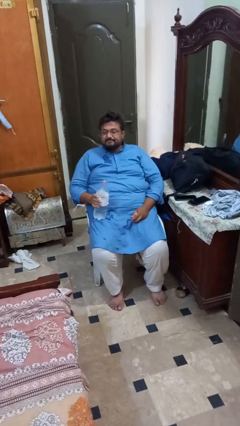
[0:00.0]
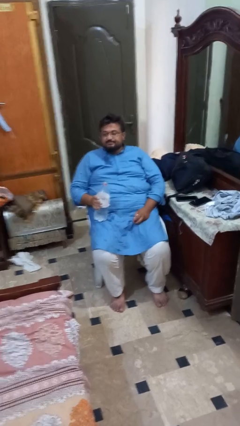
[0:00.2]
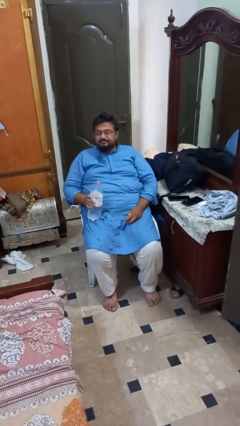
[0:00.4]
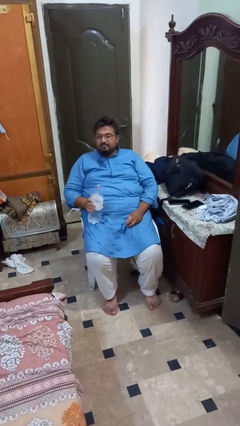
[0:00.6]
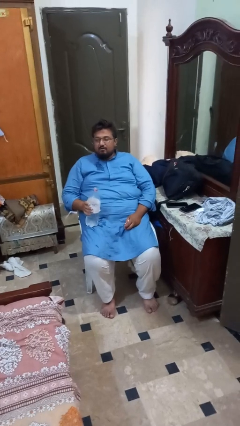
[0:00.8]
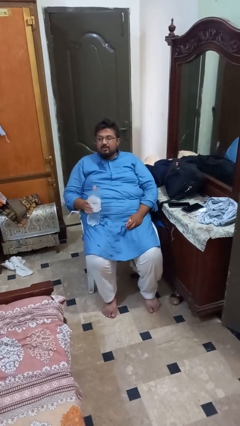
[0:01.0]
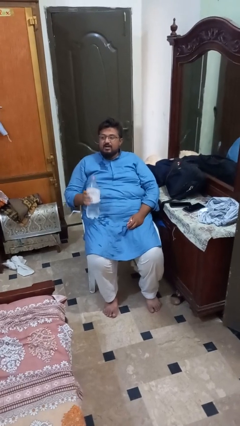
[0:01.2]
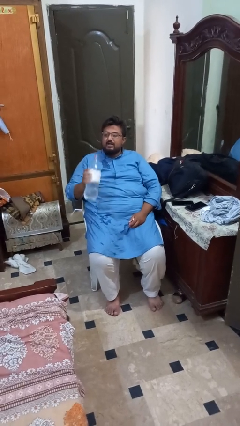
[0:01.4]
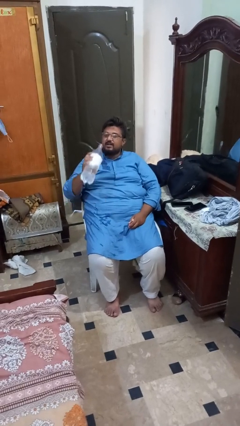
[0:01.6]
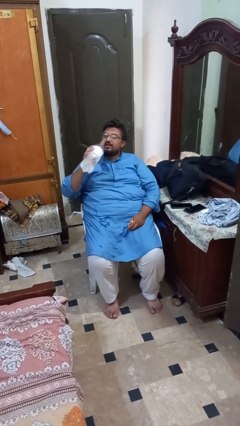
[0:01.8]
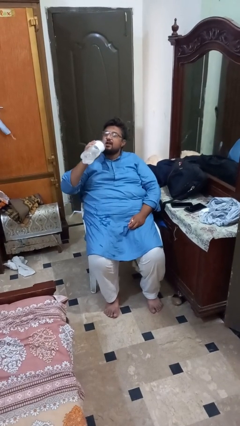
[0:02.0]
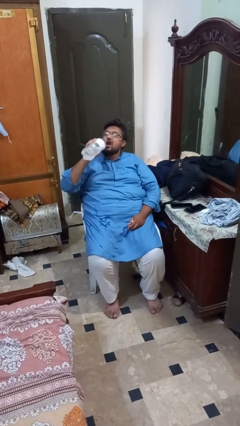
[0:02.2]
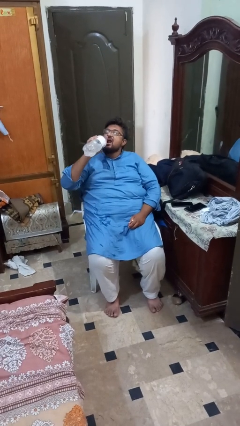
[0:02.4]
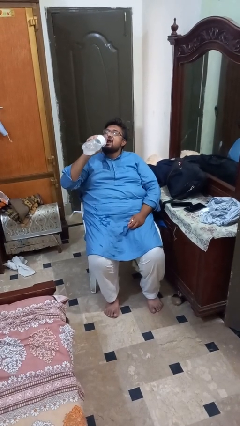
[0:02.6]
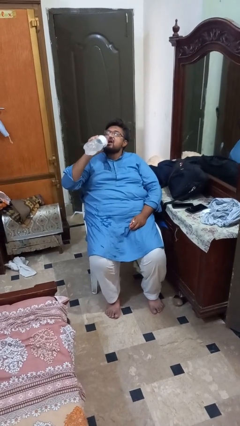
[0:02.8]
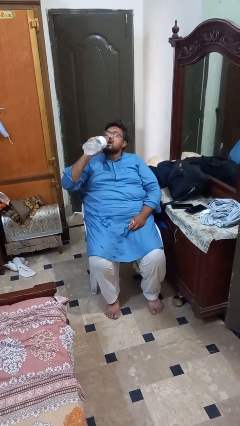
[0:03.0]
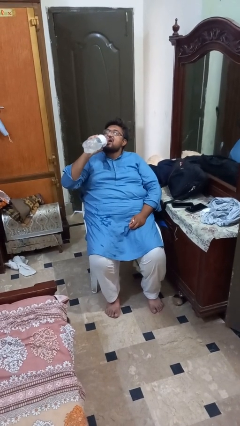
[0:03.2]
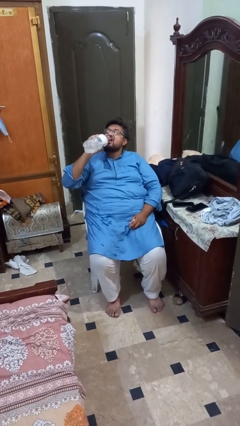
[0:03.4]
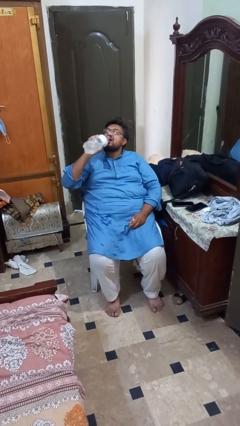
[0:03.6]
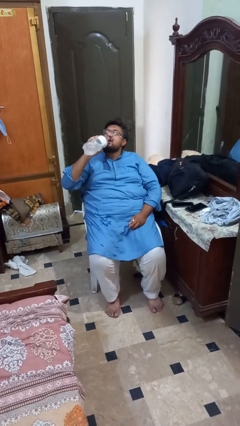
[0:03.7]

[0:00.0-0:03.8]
person drinks from bottle

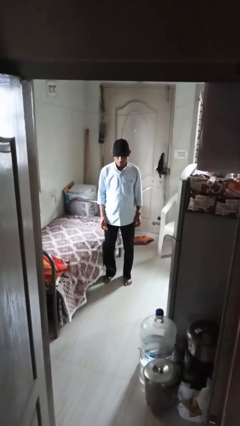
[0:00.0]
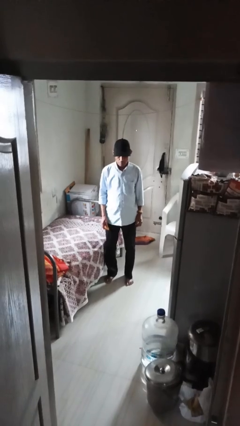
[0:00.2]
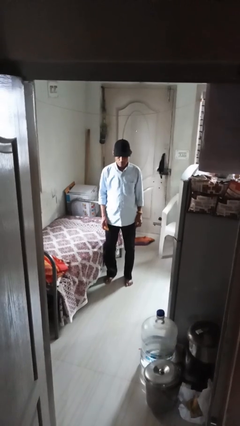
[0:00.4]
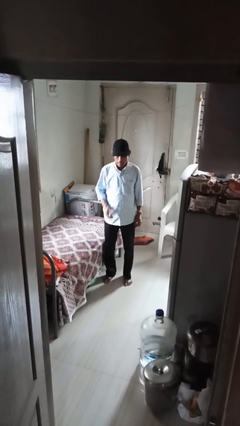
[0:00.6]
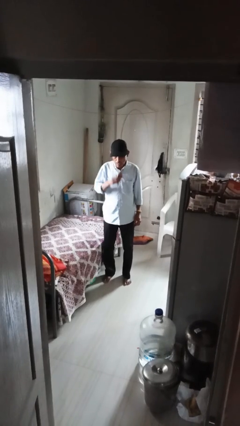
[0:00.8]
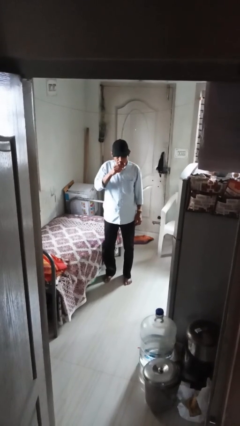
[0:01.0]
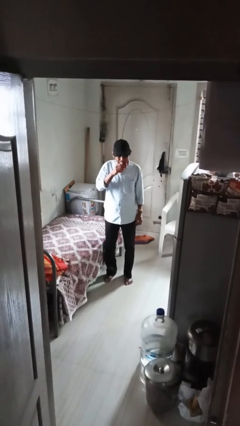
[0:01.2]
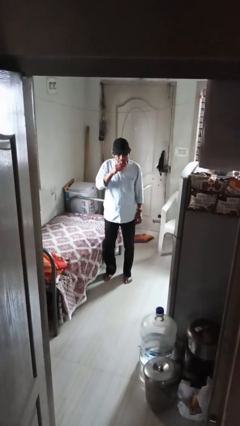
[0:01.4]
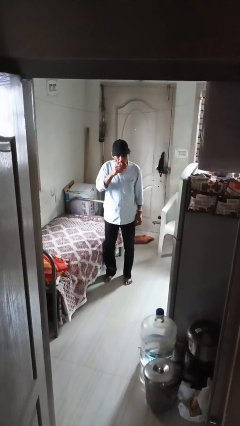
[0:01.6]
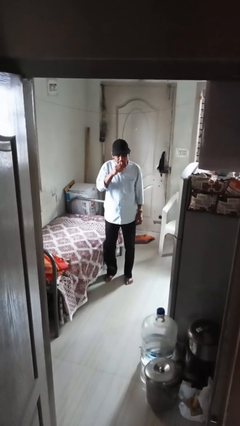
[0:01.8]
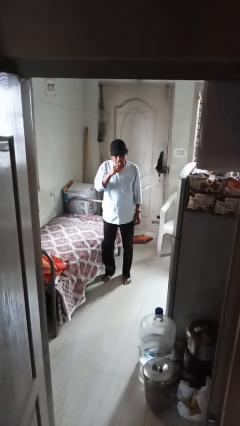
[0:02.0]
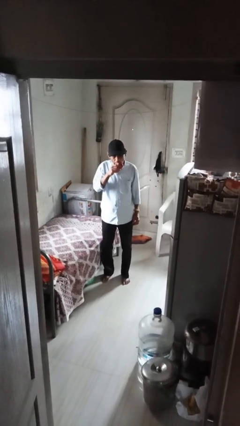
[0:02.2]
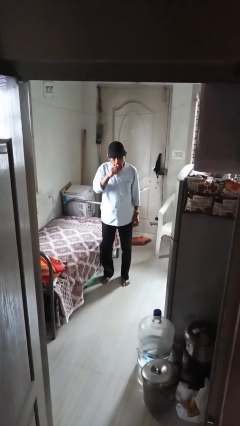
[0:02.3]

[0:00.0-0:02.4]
person eats apple

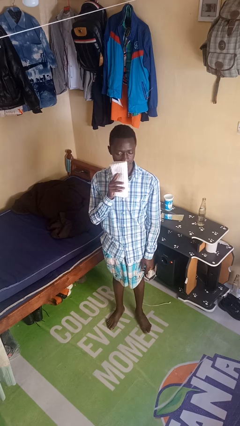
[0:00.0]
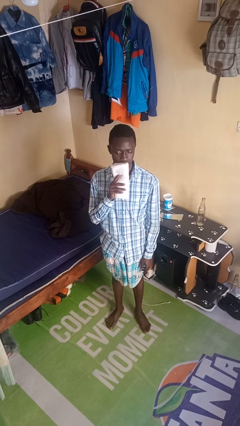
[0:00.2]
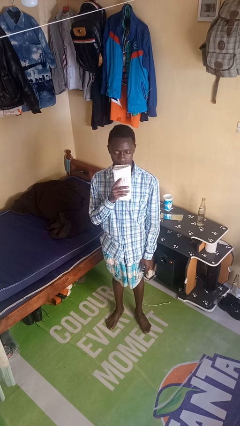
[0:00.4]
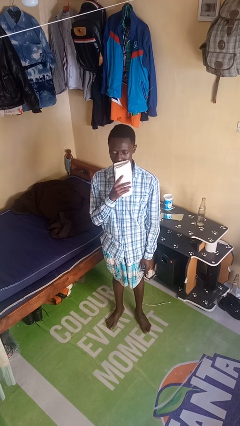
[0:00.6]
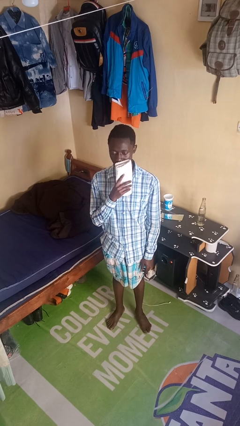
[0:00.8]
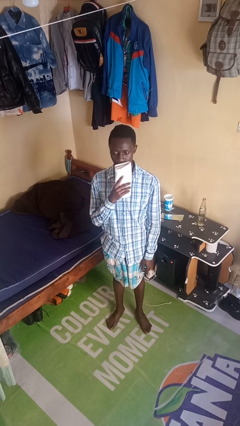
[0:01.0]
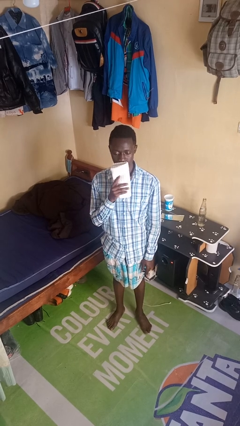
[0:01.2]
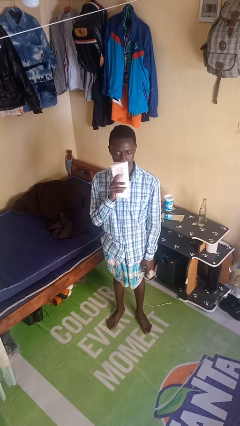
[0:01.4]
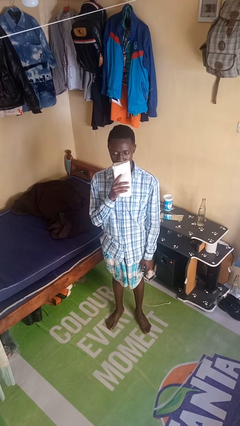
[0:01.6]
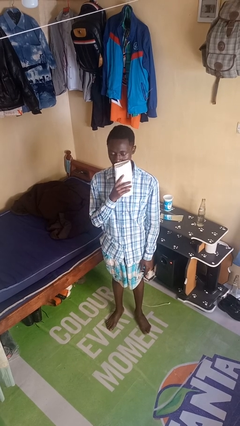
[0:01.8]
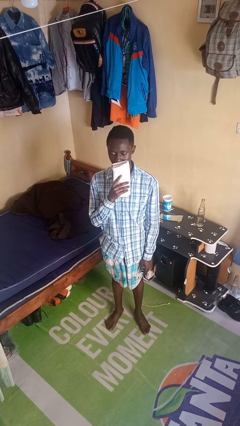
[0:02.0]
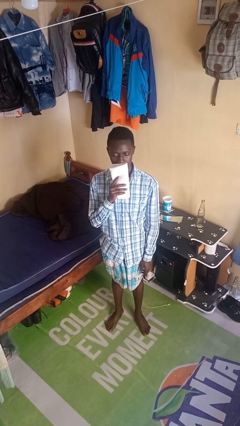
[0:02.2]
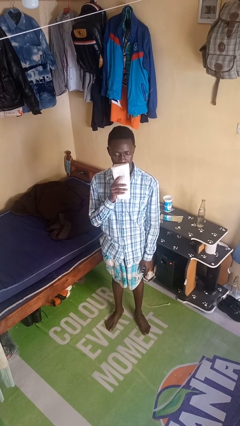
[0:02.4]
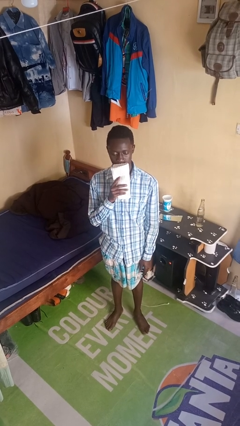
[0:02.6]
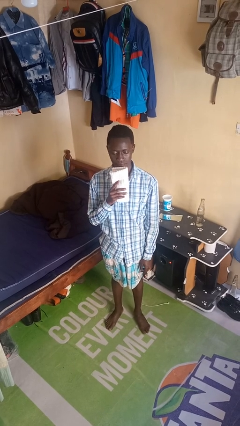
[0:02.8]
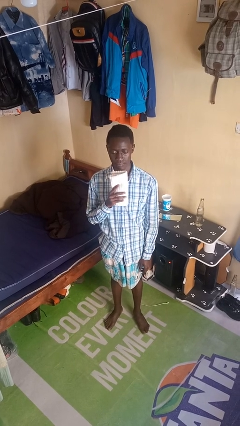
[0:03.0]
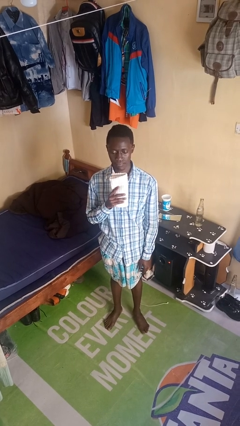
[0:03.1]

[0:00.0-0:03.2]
person wipes mouth with napkin

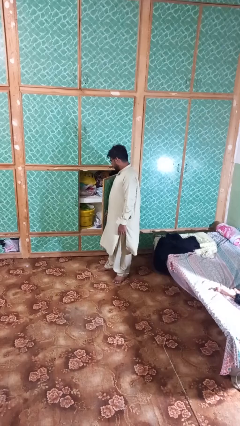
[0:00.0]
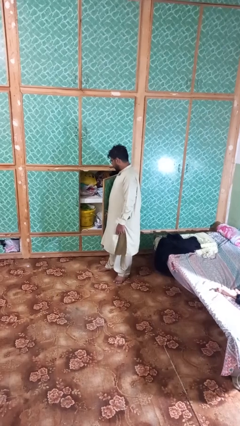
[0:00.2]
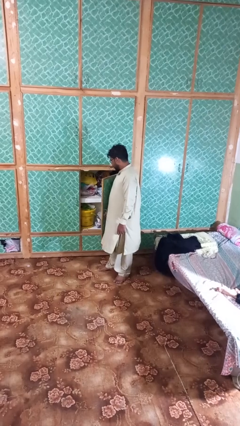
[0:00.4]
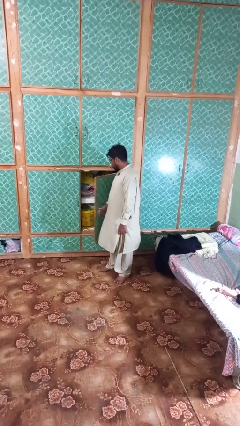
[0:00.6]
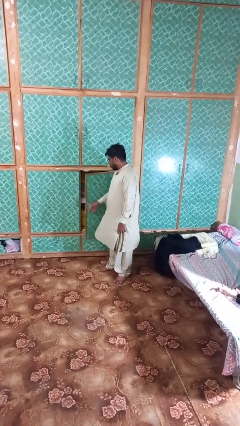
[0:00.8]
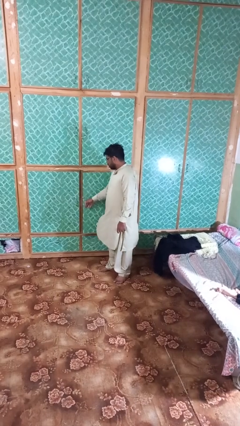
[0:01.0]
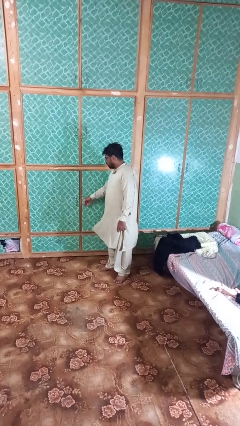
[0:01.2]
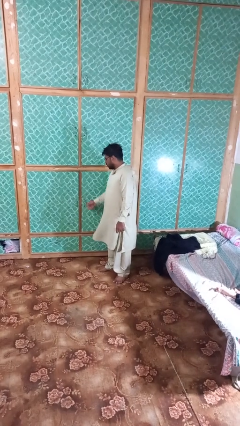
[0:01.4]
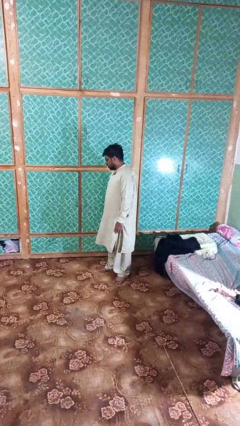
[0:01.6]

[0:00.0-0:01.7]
person closes closet door

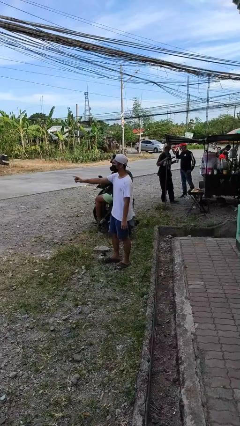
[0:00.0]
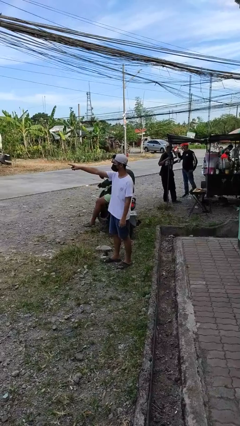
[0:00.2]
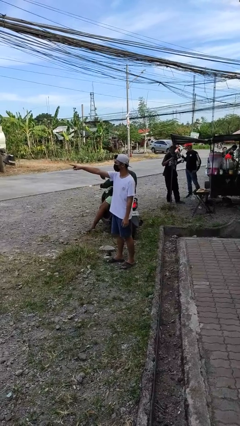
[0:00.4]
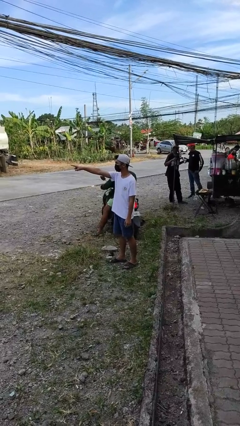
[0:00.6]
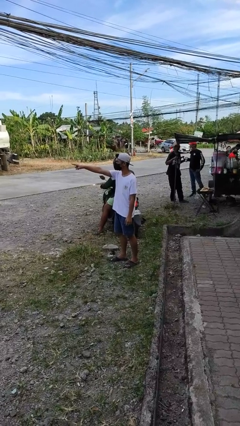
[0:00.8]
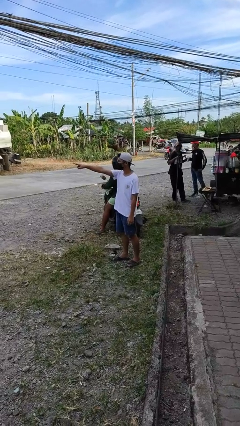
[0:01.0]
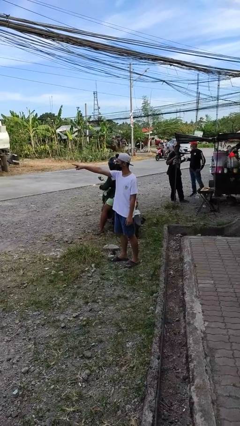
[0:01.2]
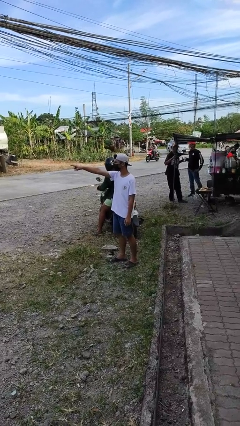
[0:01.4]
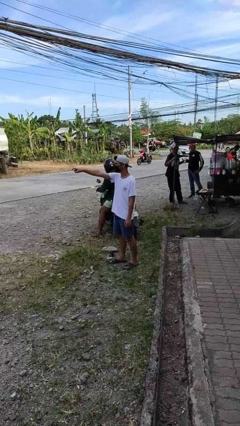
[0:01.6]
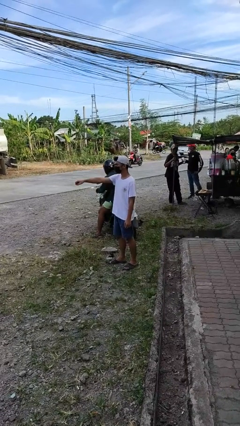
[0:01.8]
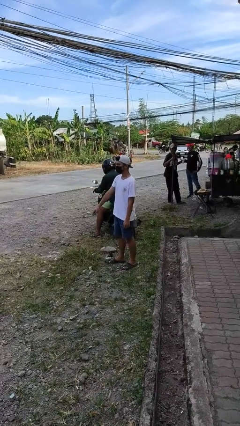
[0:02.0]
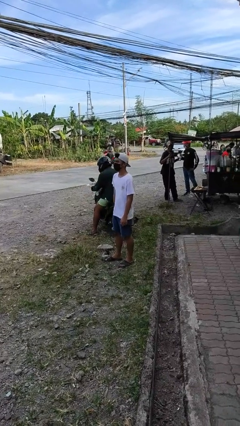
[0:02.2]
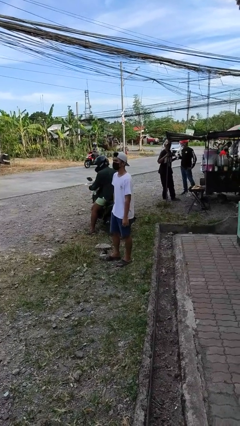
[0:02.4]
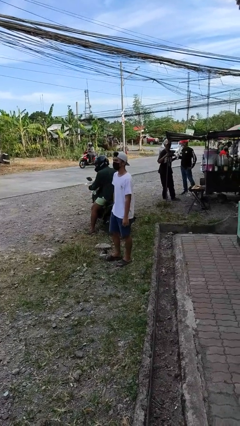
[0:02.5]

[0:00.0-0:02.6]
person points at person

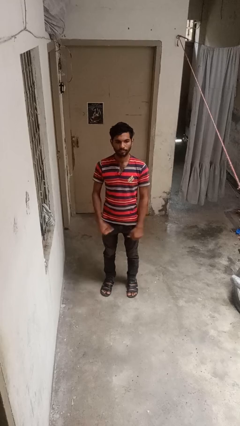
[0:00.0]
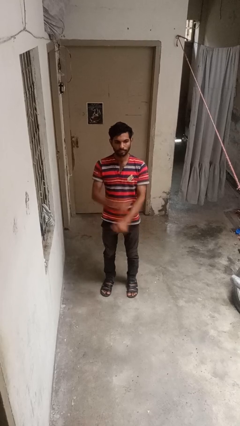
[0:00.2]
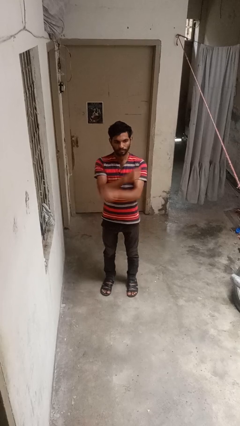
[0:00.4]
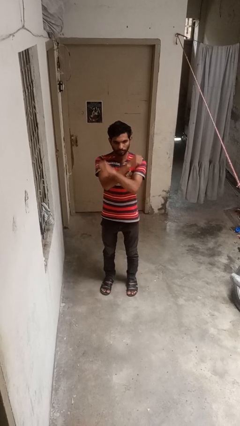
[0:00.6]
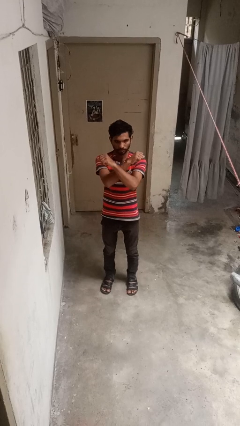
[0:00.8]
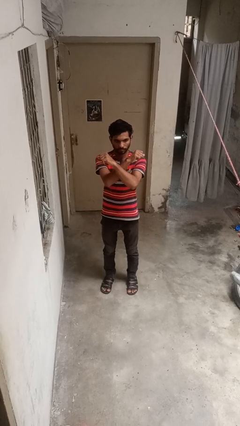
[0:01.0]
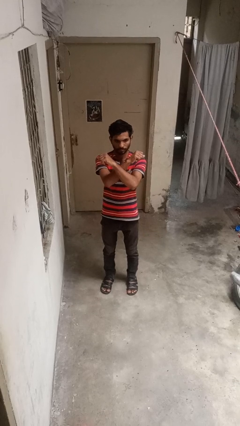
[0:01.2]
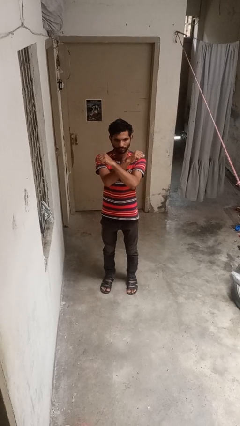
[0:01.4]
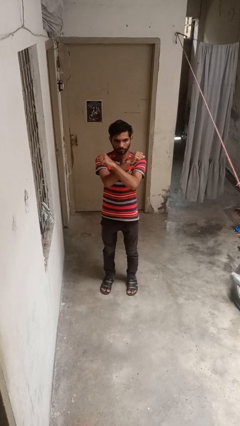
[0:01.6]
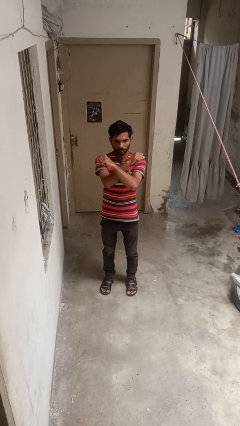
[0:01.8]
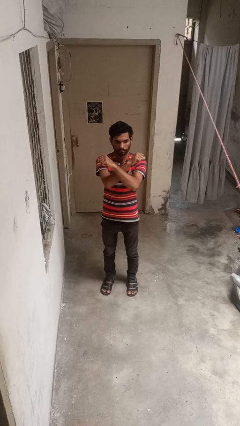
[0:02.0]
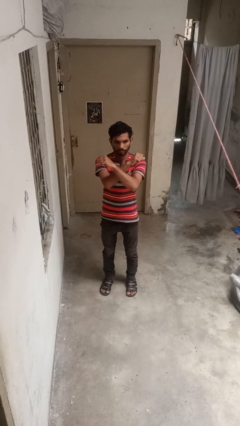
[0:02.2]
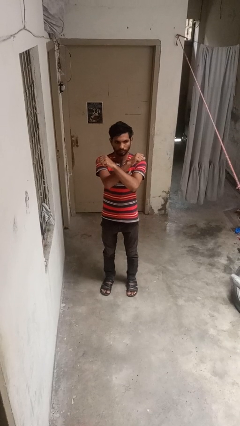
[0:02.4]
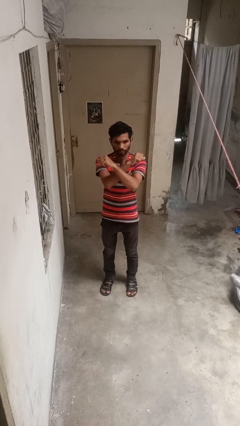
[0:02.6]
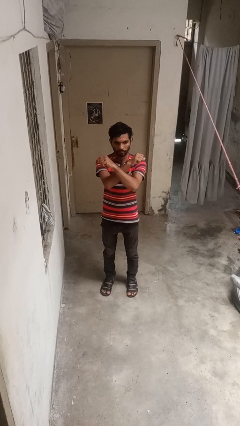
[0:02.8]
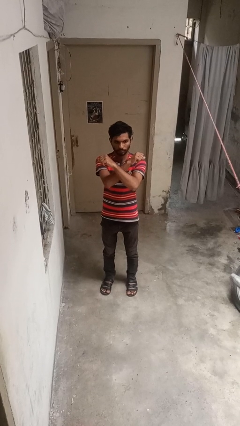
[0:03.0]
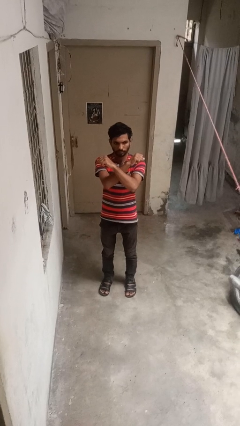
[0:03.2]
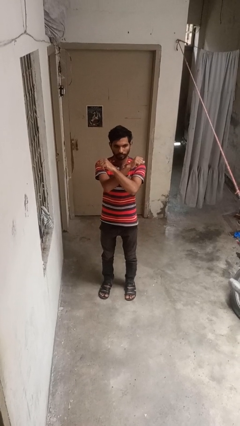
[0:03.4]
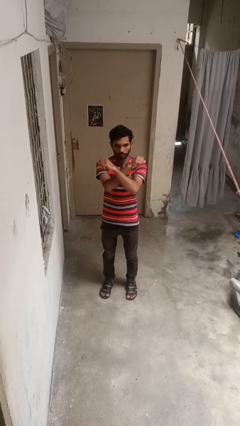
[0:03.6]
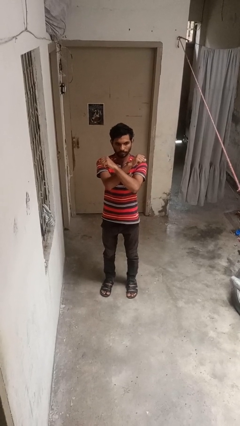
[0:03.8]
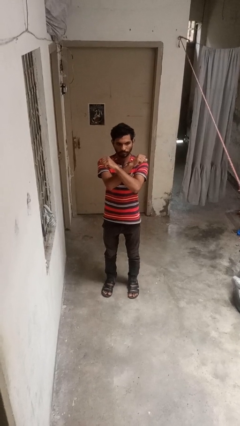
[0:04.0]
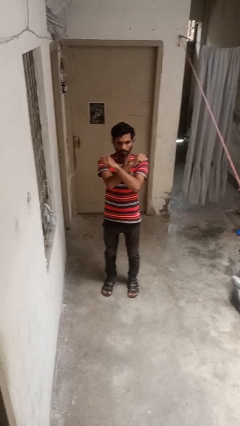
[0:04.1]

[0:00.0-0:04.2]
person gestures arms x
